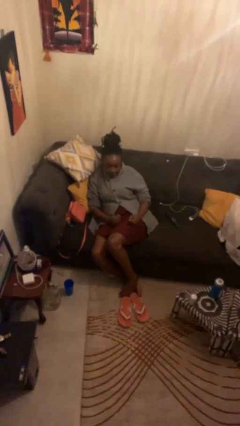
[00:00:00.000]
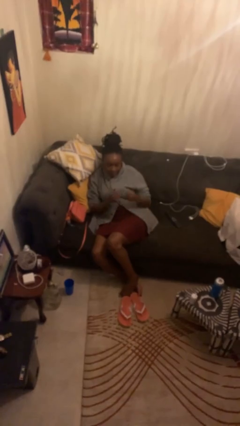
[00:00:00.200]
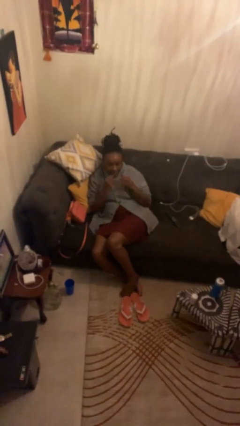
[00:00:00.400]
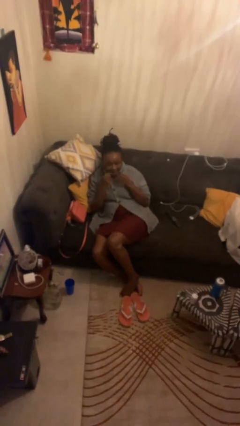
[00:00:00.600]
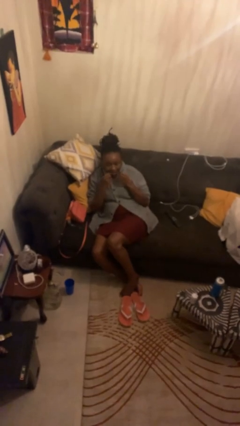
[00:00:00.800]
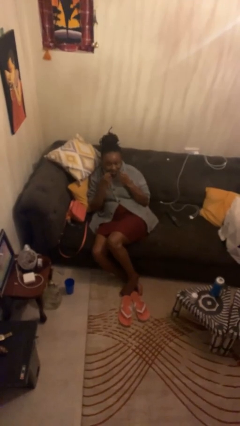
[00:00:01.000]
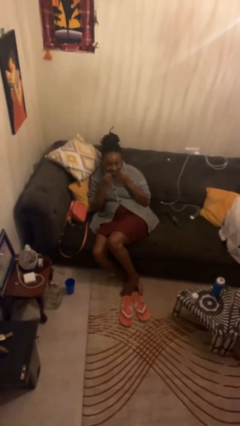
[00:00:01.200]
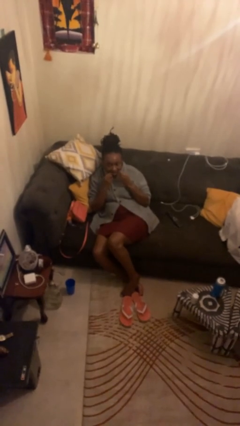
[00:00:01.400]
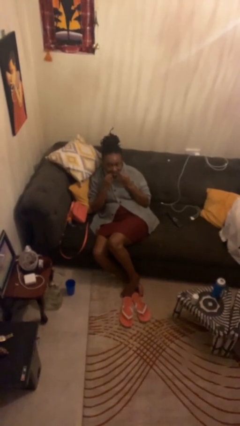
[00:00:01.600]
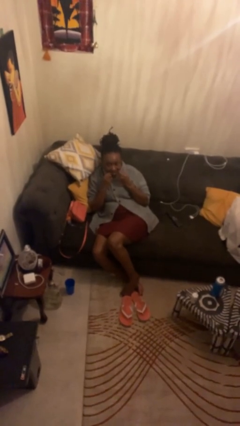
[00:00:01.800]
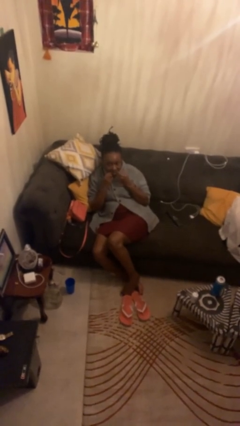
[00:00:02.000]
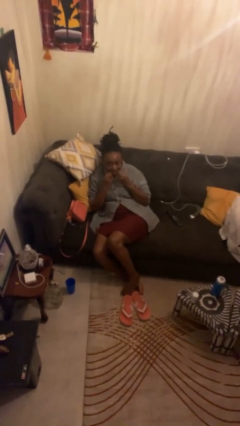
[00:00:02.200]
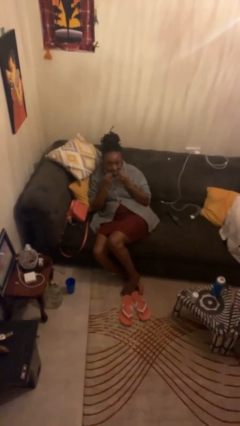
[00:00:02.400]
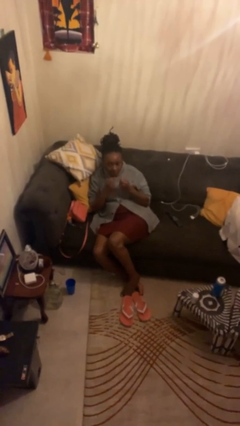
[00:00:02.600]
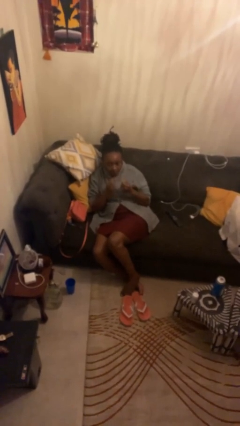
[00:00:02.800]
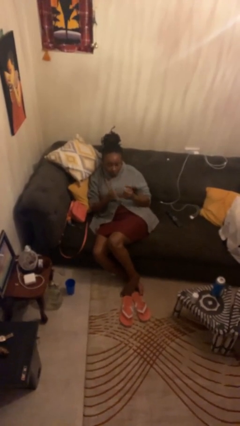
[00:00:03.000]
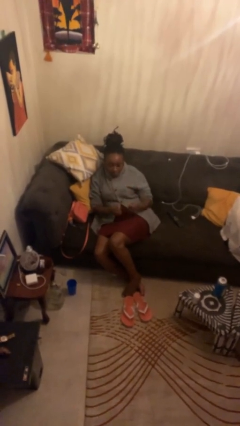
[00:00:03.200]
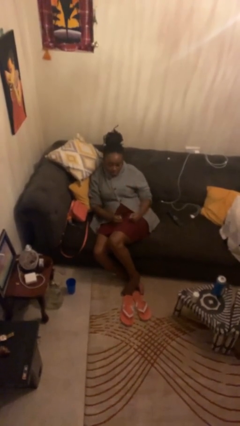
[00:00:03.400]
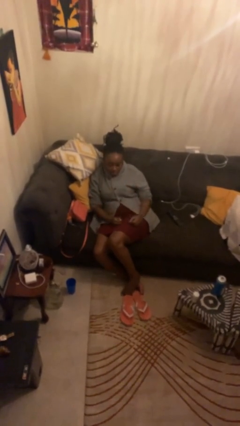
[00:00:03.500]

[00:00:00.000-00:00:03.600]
person flosses

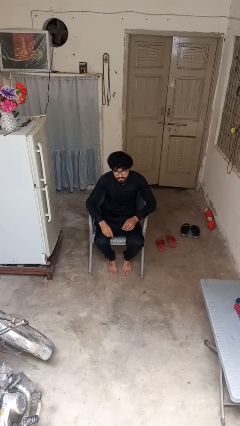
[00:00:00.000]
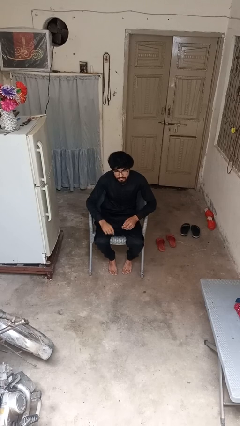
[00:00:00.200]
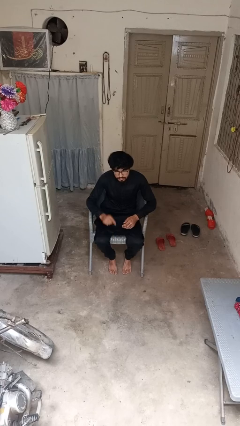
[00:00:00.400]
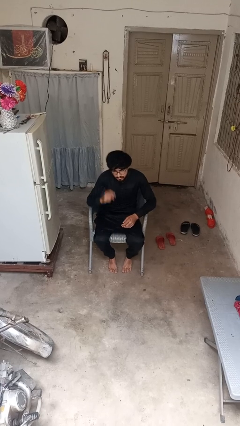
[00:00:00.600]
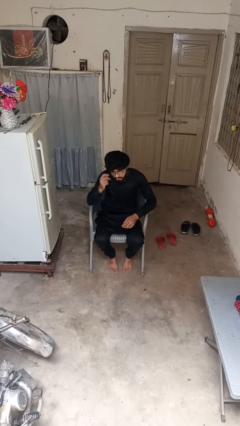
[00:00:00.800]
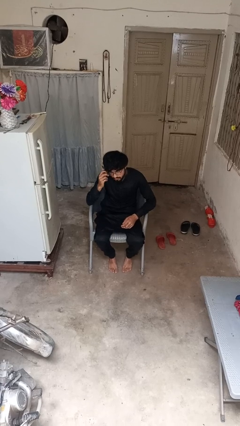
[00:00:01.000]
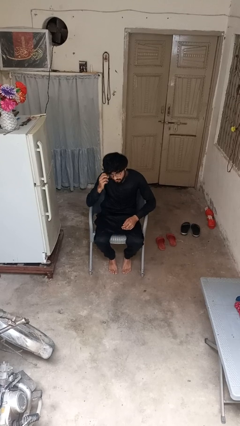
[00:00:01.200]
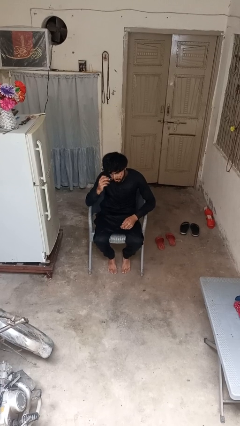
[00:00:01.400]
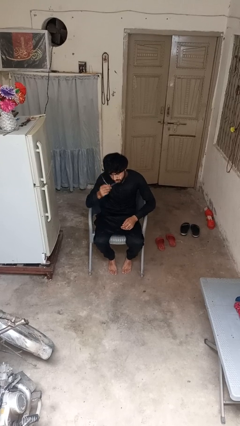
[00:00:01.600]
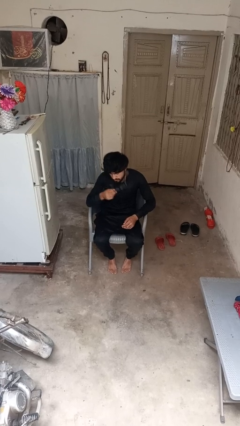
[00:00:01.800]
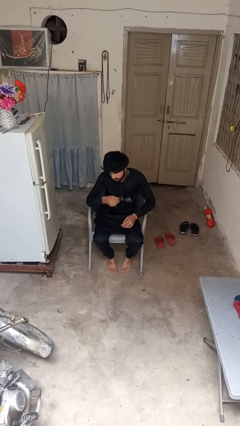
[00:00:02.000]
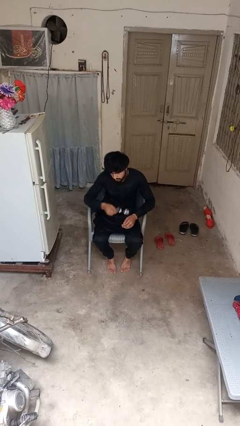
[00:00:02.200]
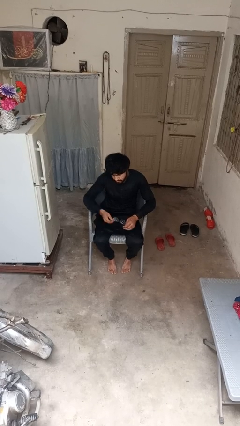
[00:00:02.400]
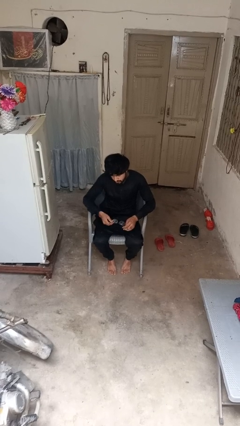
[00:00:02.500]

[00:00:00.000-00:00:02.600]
person takes off glasses

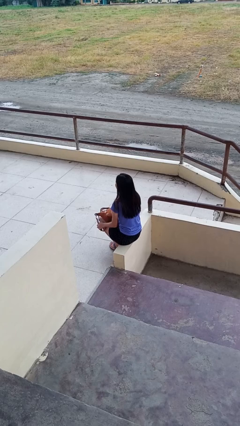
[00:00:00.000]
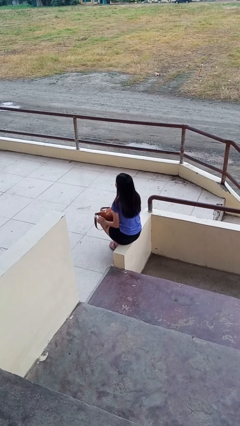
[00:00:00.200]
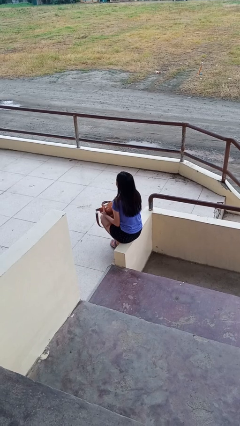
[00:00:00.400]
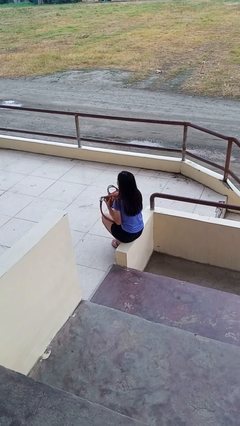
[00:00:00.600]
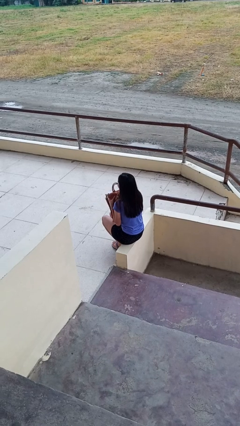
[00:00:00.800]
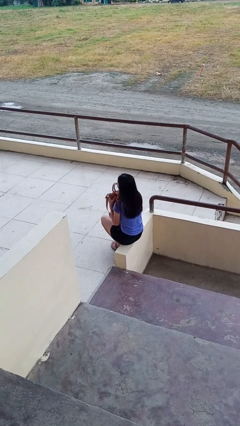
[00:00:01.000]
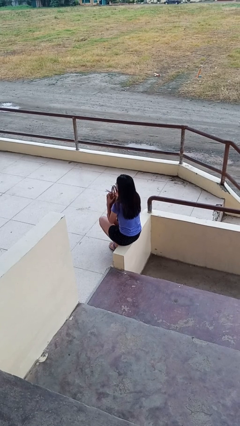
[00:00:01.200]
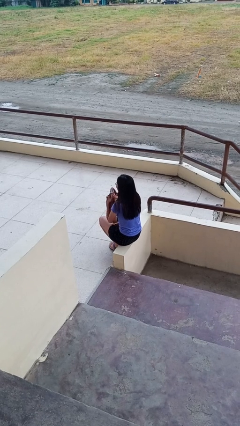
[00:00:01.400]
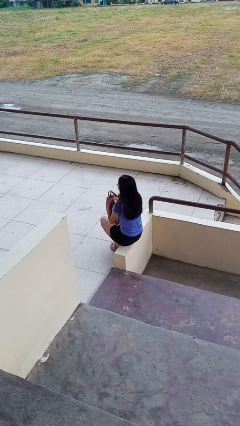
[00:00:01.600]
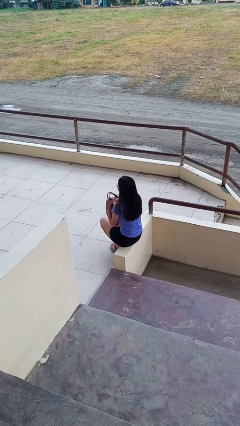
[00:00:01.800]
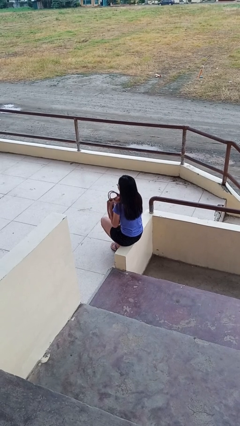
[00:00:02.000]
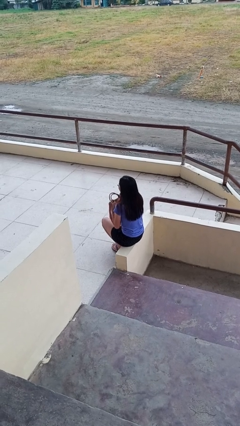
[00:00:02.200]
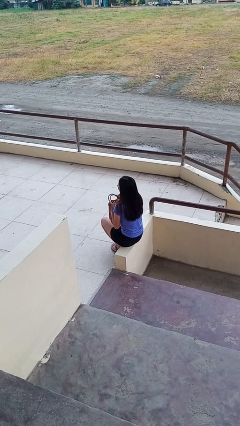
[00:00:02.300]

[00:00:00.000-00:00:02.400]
person squeezes object

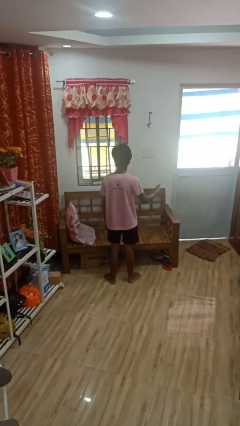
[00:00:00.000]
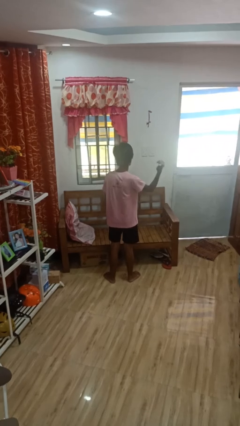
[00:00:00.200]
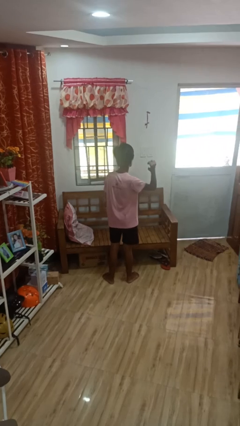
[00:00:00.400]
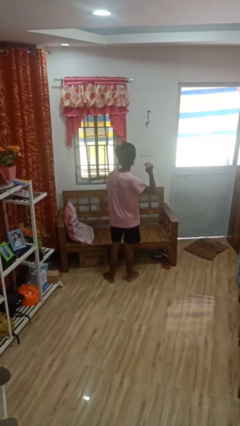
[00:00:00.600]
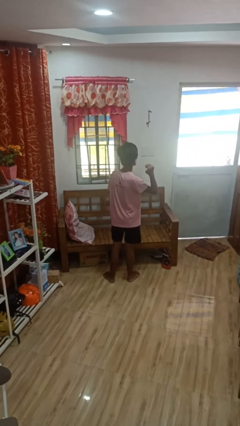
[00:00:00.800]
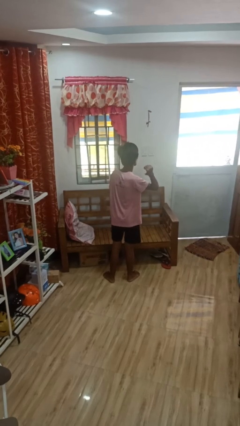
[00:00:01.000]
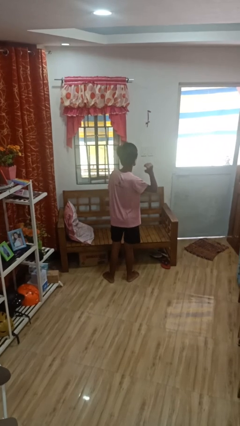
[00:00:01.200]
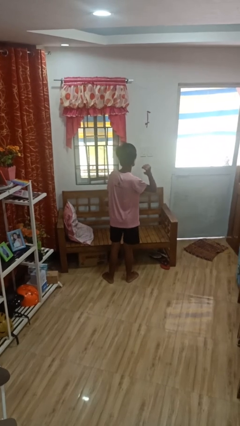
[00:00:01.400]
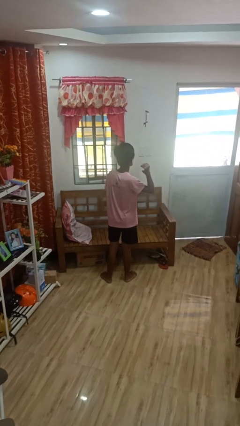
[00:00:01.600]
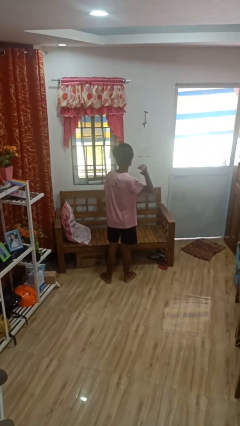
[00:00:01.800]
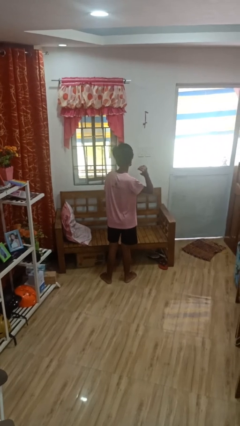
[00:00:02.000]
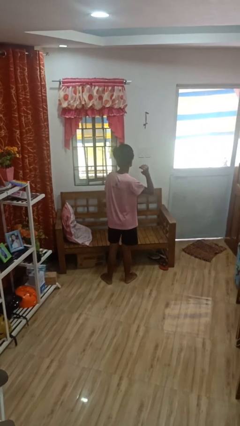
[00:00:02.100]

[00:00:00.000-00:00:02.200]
person gestures behind me

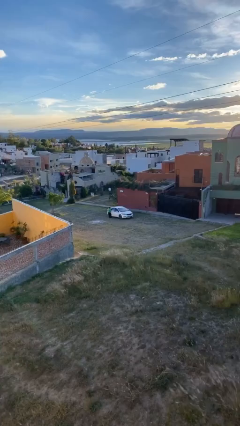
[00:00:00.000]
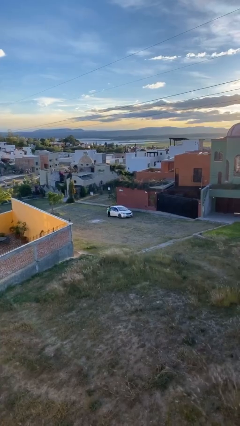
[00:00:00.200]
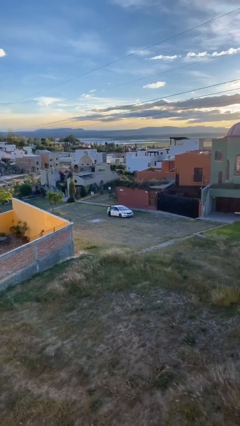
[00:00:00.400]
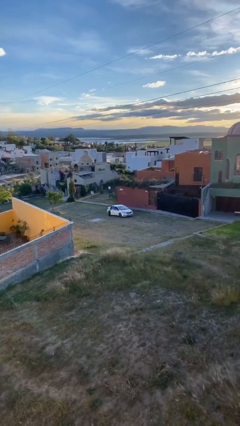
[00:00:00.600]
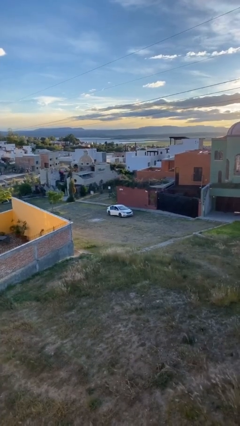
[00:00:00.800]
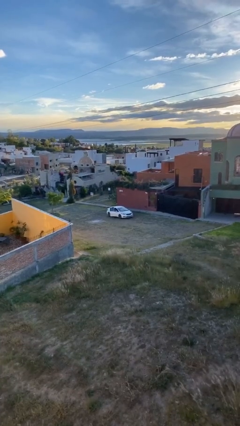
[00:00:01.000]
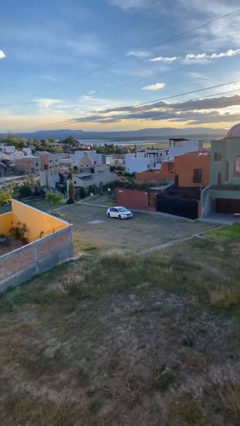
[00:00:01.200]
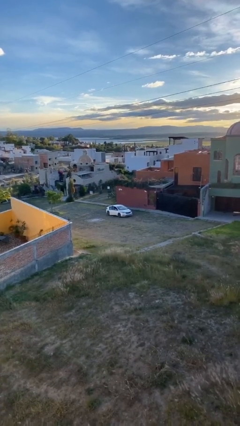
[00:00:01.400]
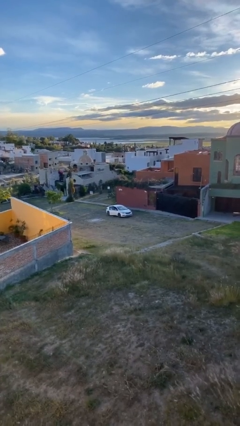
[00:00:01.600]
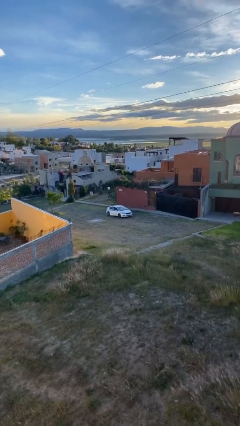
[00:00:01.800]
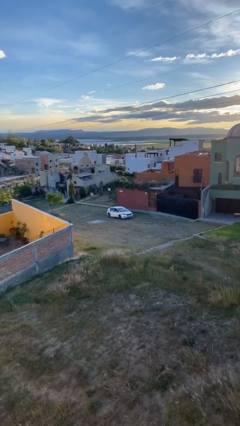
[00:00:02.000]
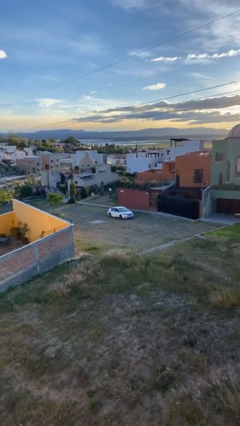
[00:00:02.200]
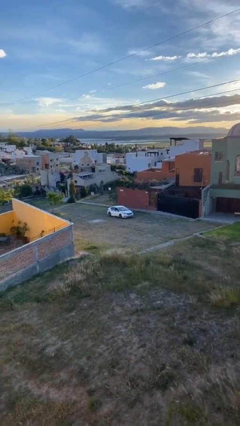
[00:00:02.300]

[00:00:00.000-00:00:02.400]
car picks up person

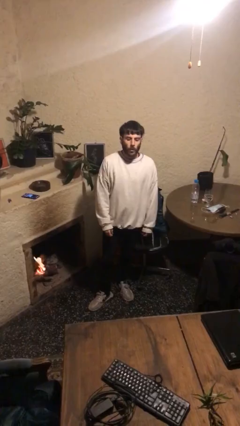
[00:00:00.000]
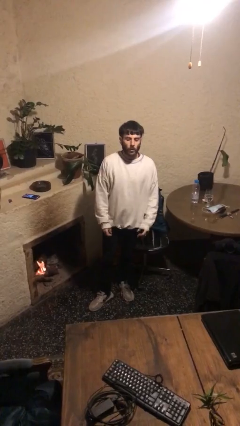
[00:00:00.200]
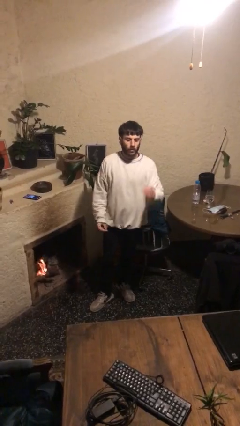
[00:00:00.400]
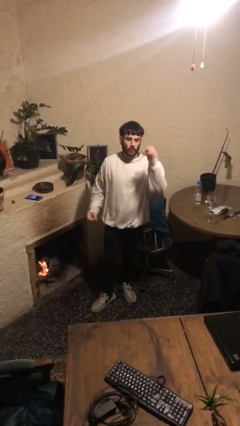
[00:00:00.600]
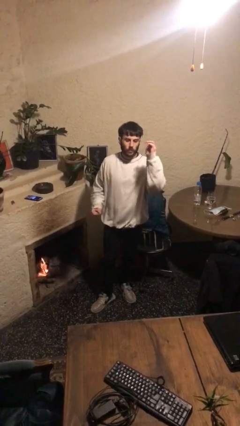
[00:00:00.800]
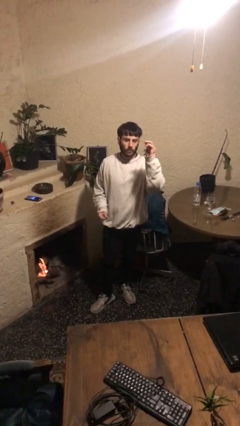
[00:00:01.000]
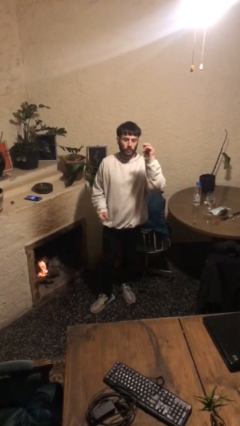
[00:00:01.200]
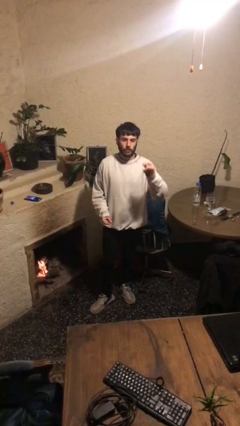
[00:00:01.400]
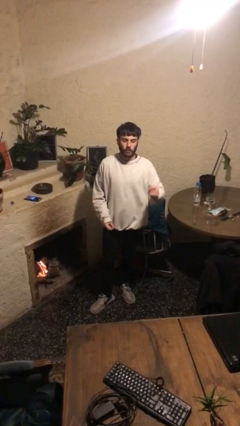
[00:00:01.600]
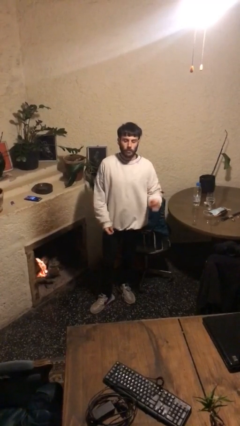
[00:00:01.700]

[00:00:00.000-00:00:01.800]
person snaps fingers

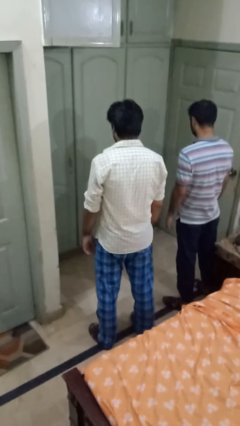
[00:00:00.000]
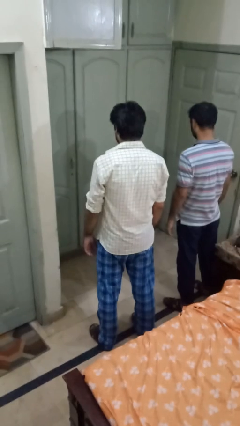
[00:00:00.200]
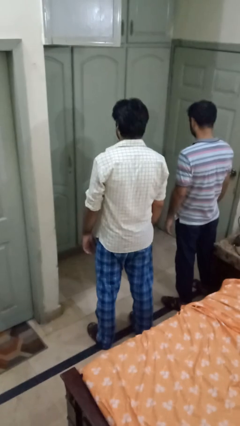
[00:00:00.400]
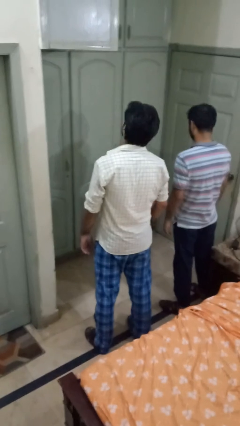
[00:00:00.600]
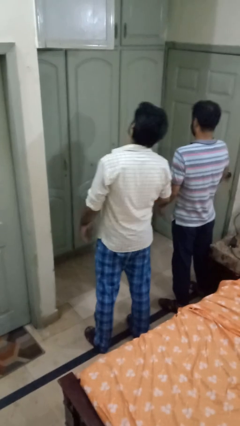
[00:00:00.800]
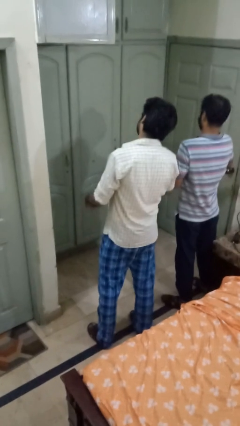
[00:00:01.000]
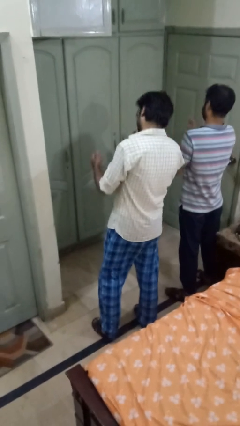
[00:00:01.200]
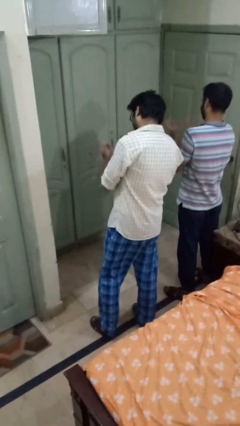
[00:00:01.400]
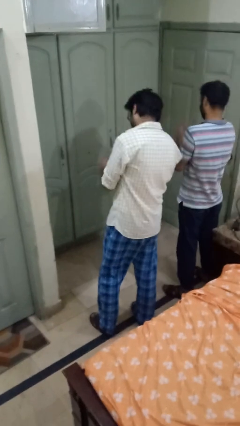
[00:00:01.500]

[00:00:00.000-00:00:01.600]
person laughs with person

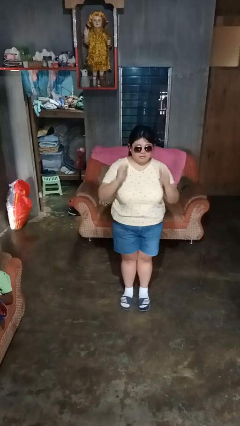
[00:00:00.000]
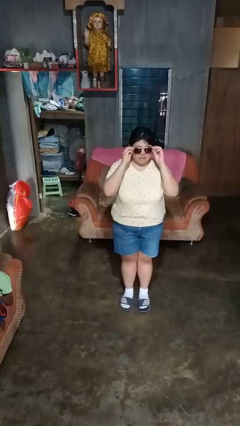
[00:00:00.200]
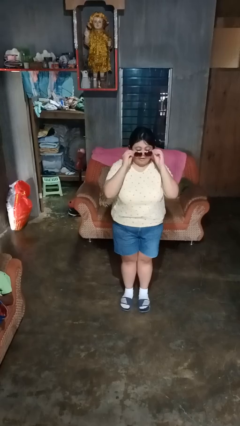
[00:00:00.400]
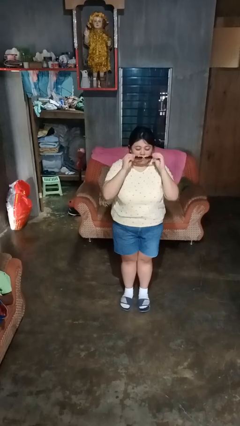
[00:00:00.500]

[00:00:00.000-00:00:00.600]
person takes off sunglasses
